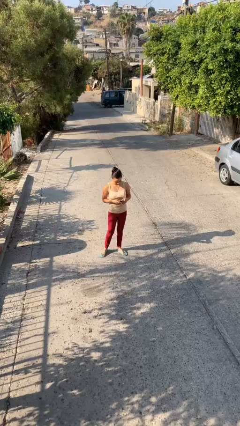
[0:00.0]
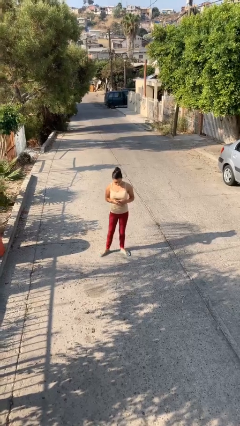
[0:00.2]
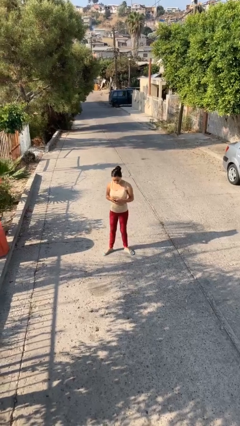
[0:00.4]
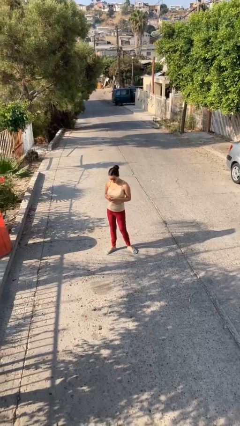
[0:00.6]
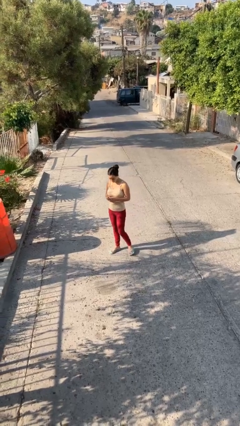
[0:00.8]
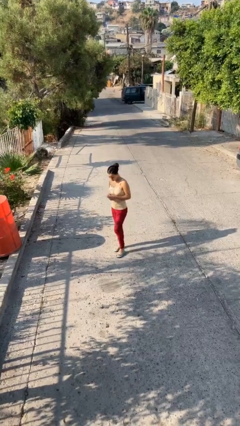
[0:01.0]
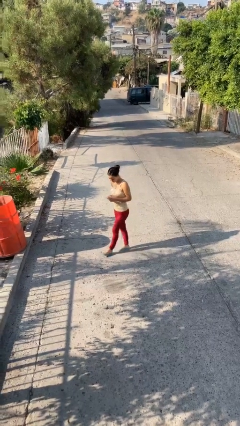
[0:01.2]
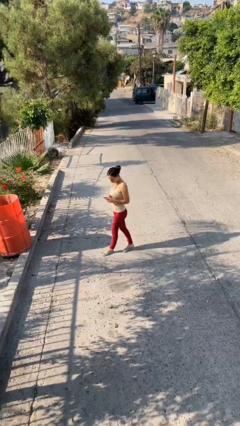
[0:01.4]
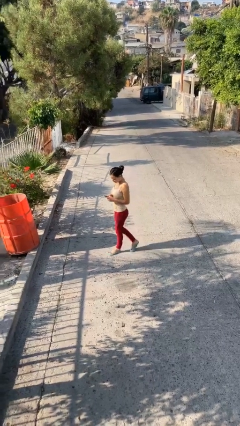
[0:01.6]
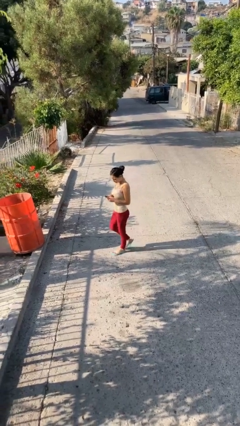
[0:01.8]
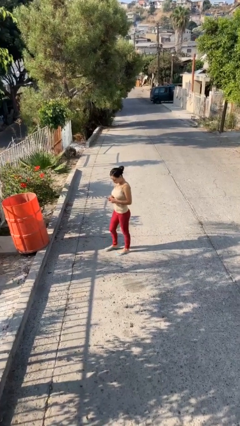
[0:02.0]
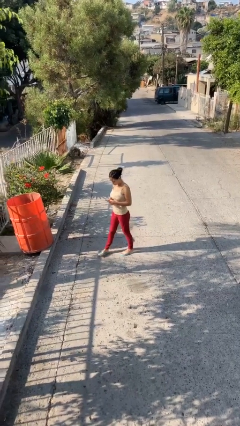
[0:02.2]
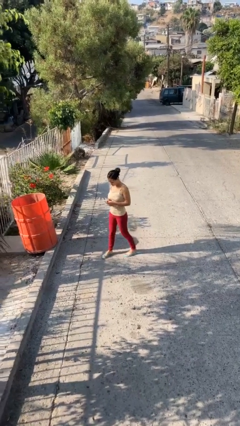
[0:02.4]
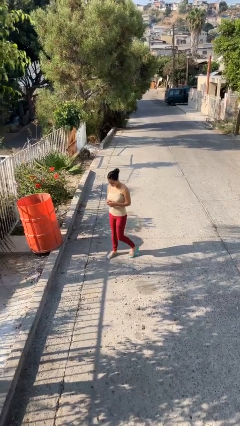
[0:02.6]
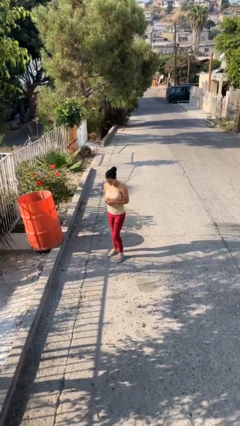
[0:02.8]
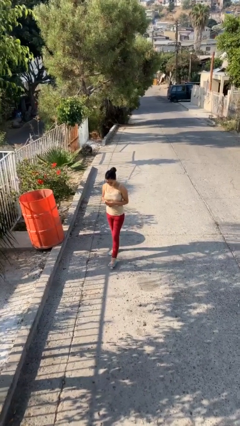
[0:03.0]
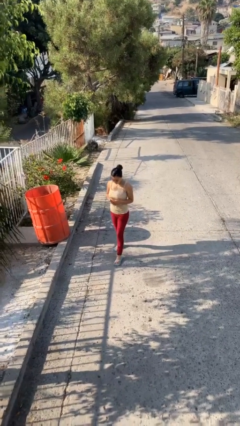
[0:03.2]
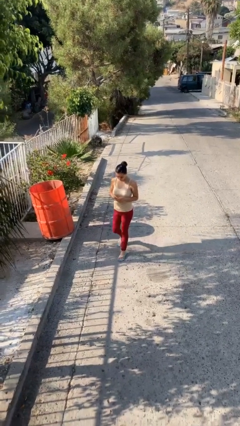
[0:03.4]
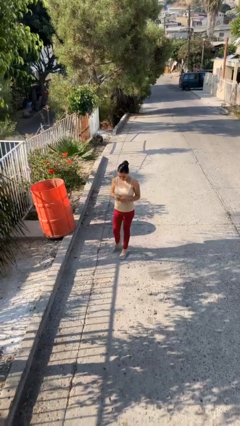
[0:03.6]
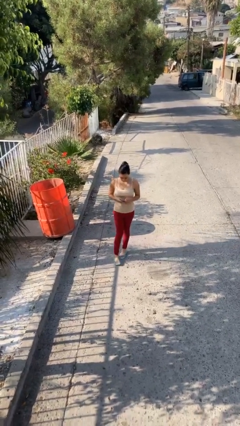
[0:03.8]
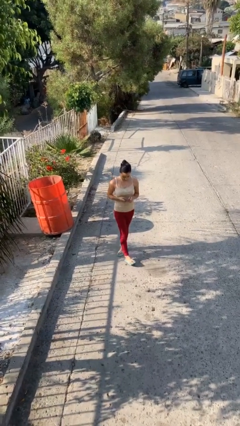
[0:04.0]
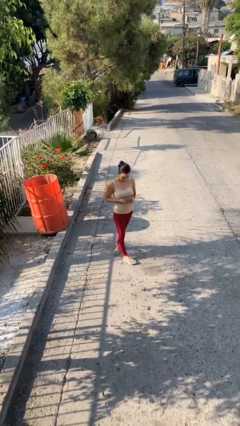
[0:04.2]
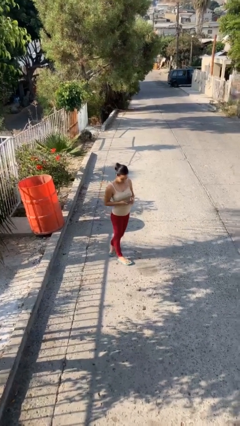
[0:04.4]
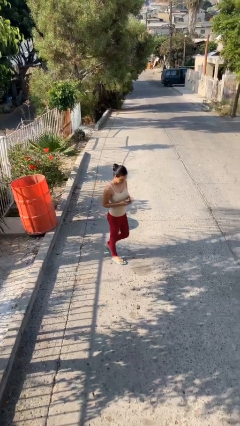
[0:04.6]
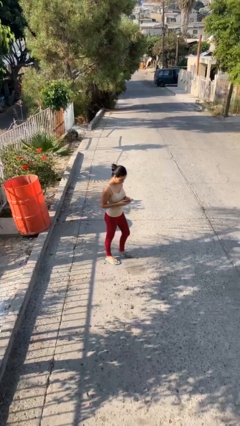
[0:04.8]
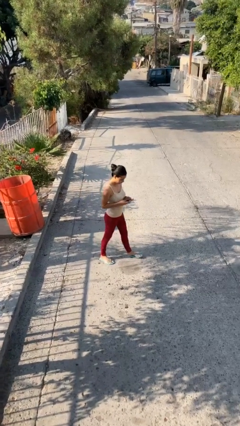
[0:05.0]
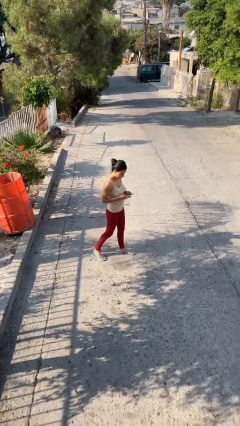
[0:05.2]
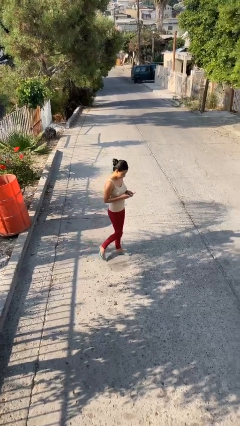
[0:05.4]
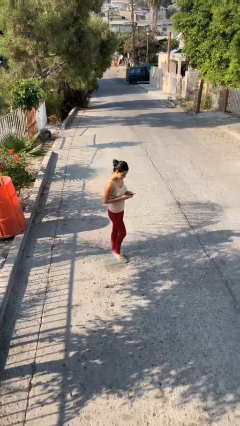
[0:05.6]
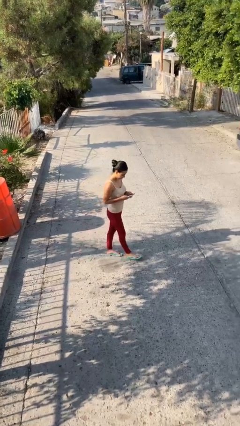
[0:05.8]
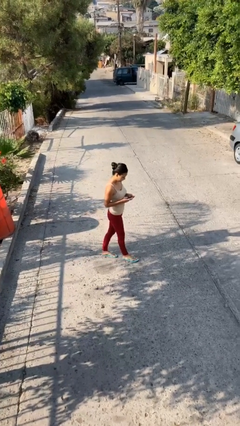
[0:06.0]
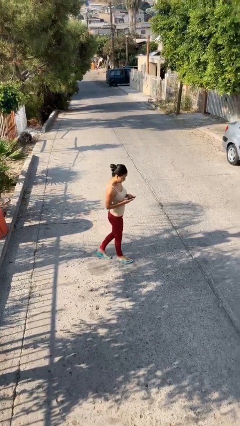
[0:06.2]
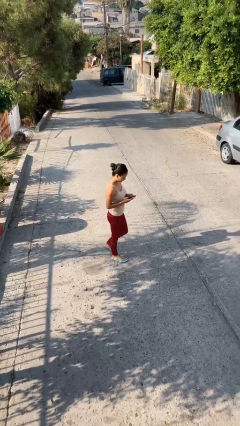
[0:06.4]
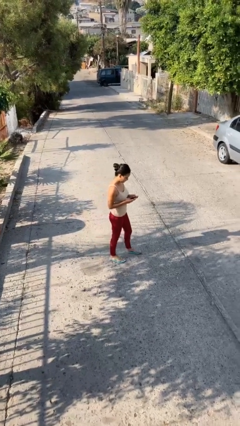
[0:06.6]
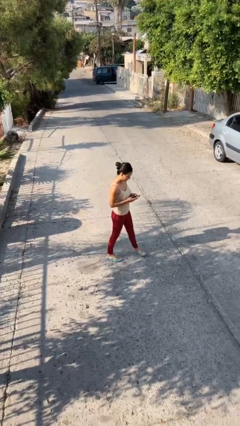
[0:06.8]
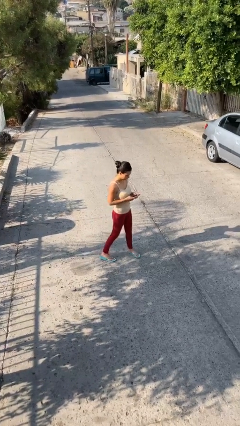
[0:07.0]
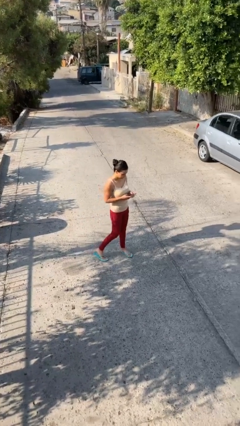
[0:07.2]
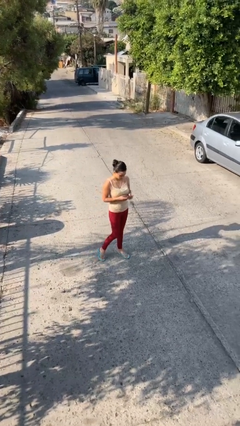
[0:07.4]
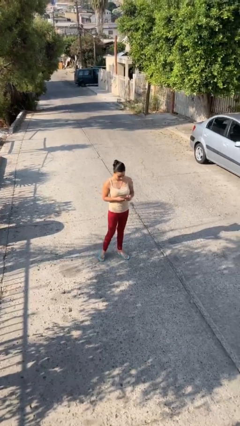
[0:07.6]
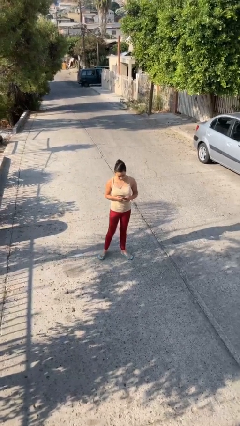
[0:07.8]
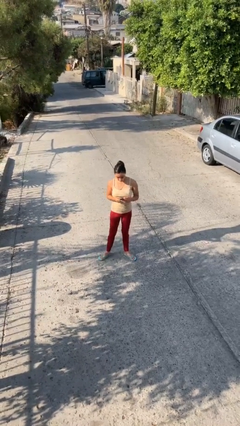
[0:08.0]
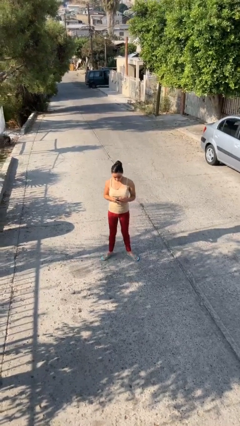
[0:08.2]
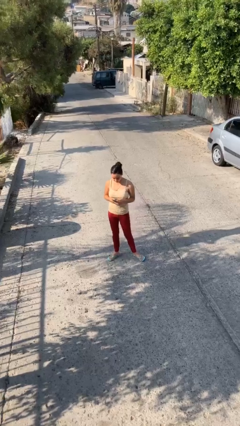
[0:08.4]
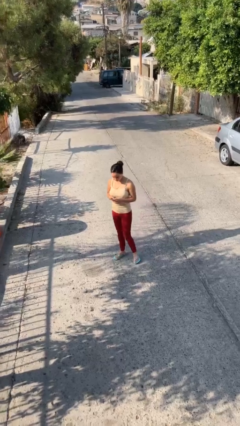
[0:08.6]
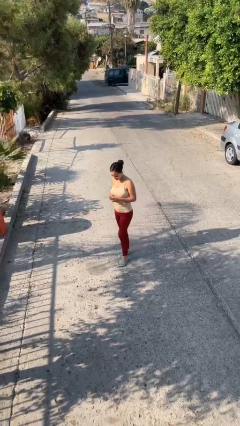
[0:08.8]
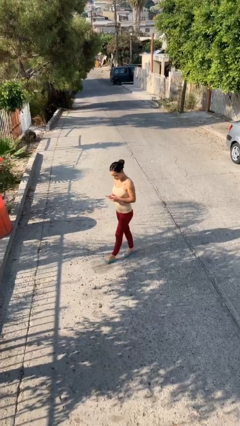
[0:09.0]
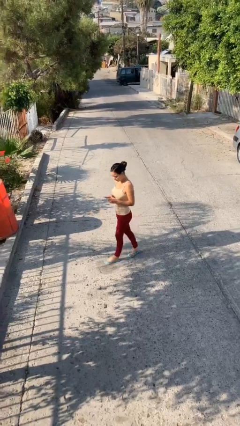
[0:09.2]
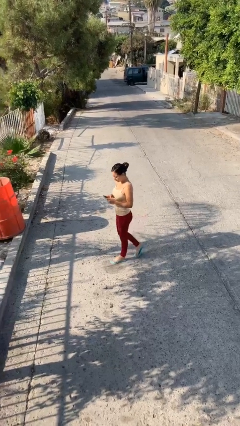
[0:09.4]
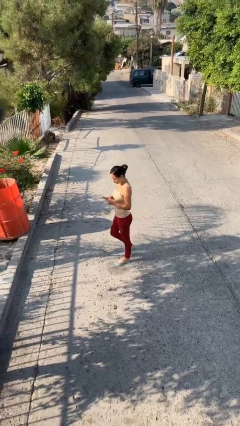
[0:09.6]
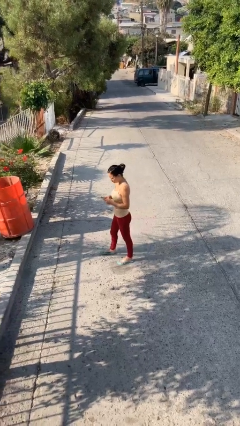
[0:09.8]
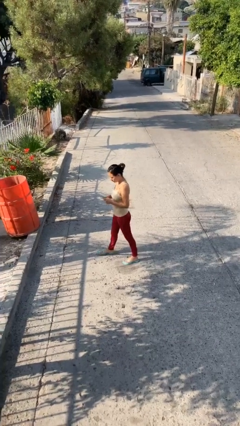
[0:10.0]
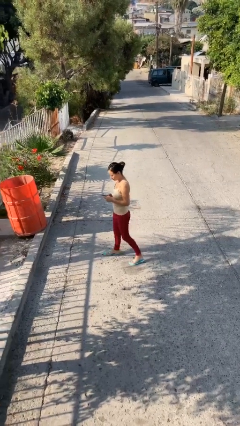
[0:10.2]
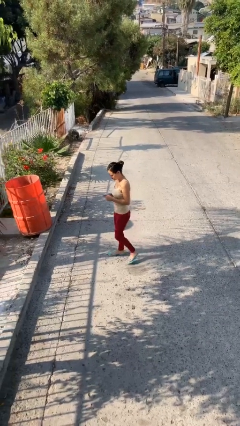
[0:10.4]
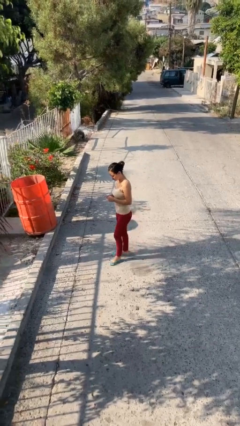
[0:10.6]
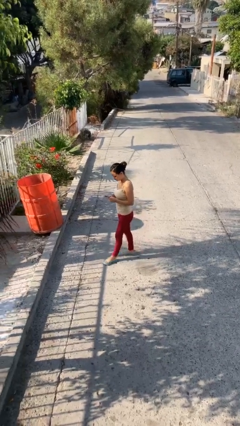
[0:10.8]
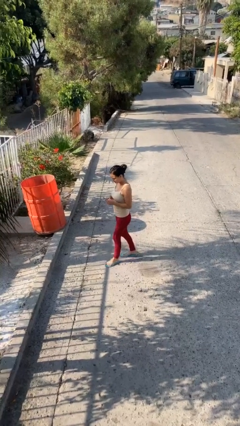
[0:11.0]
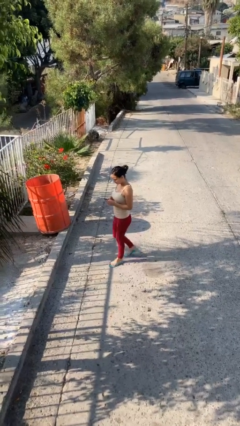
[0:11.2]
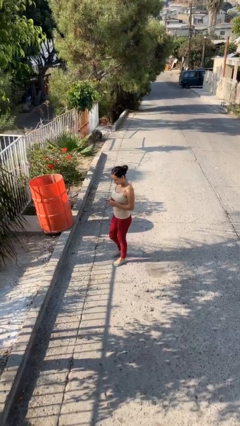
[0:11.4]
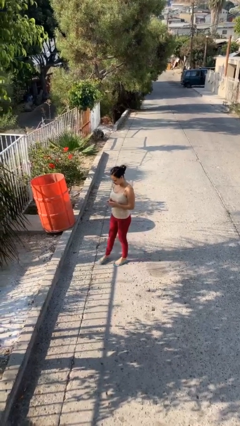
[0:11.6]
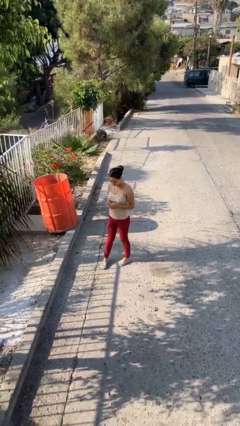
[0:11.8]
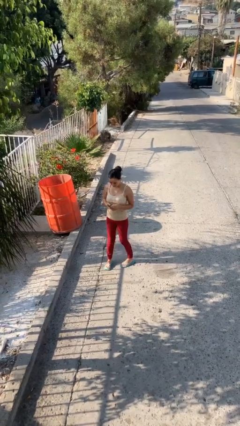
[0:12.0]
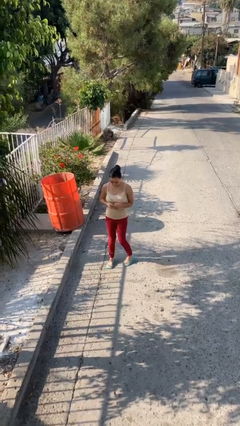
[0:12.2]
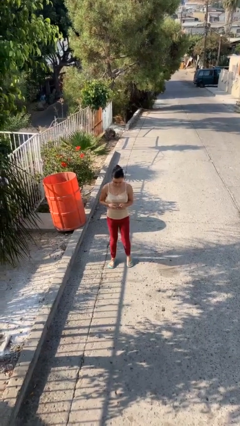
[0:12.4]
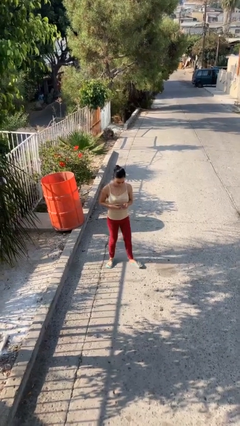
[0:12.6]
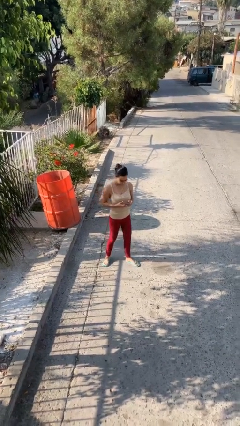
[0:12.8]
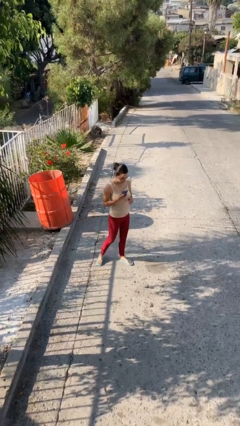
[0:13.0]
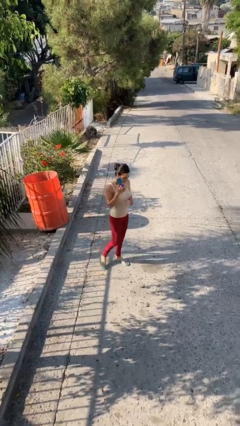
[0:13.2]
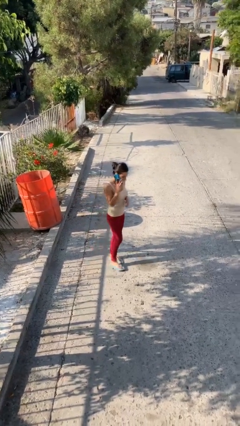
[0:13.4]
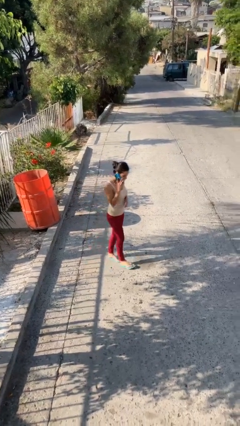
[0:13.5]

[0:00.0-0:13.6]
person texts on phone

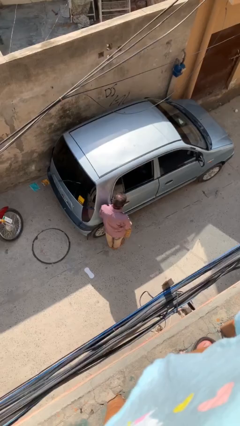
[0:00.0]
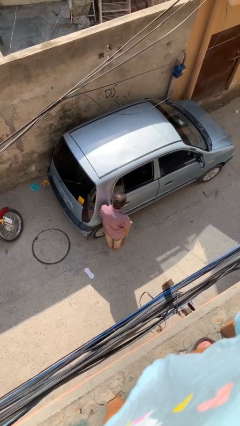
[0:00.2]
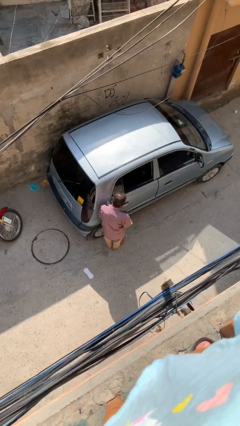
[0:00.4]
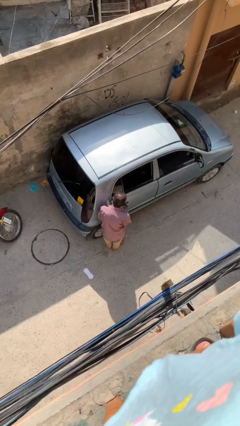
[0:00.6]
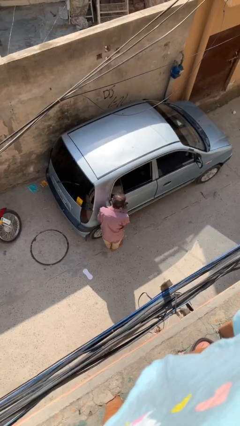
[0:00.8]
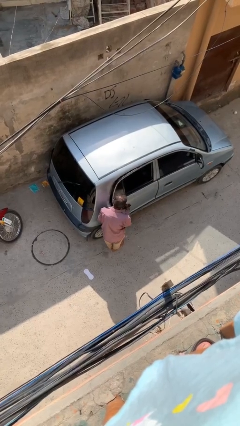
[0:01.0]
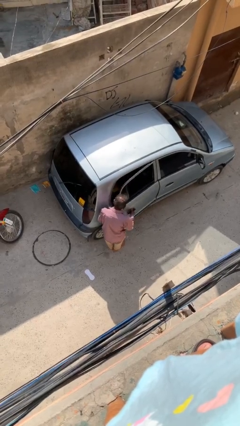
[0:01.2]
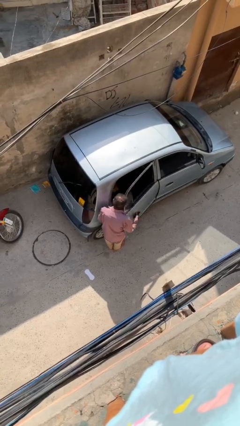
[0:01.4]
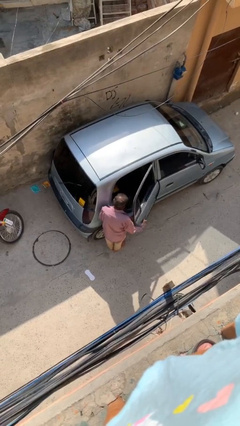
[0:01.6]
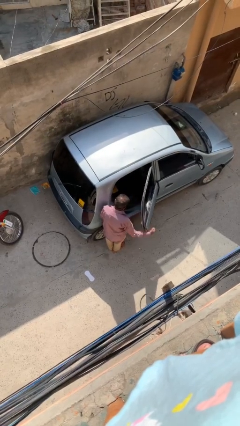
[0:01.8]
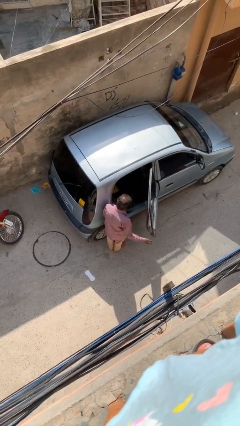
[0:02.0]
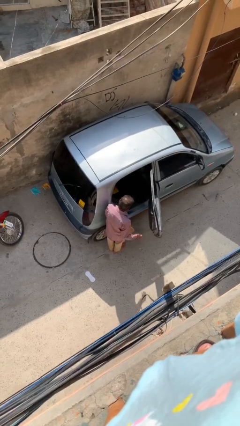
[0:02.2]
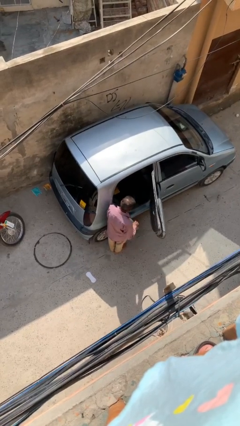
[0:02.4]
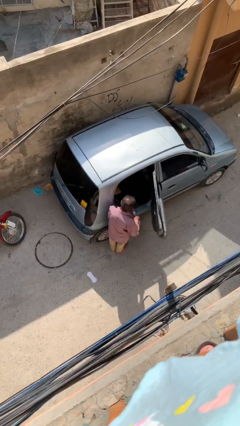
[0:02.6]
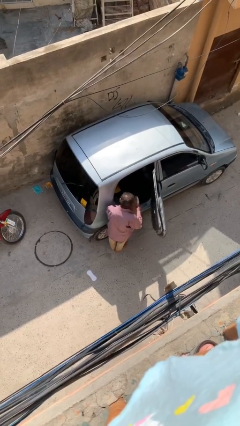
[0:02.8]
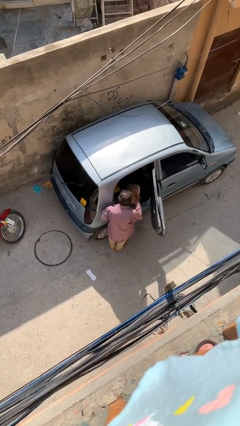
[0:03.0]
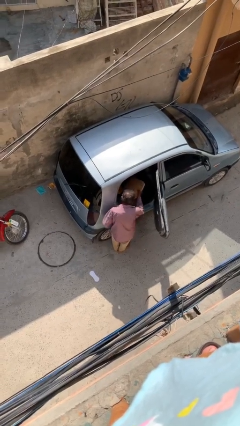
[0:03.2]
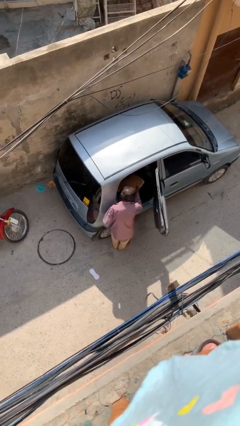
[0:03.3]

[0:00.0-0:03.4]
person opens car door

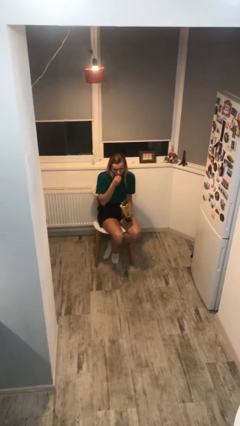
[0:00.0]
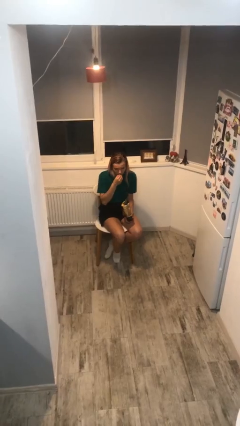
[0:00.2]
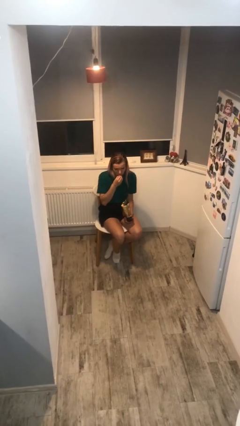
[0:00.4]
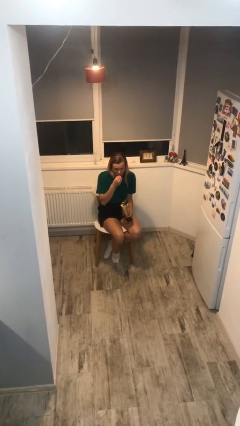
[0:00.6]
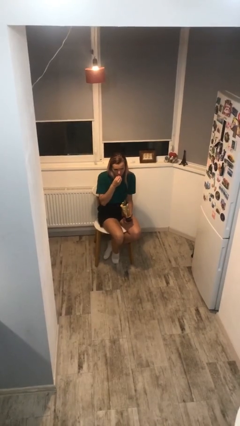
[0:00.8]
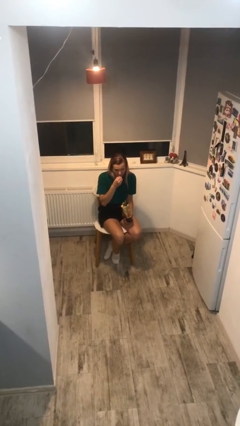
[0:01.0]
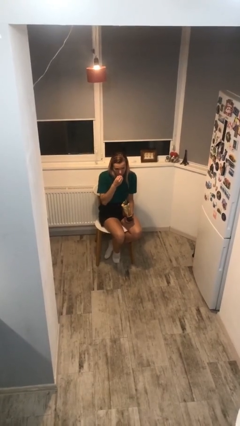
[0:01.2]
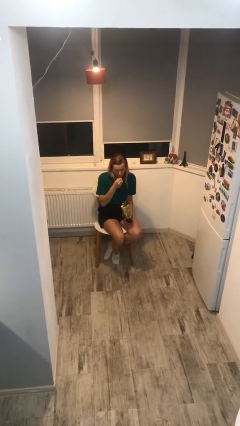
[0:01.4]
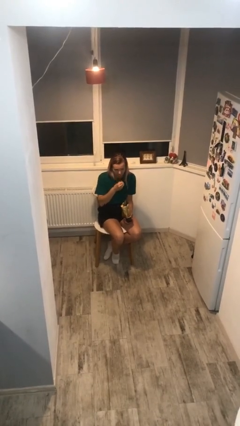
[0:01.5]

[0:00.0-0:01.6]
person eats snack from bag
